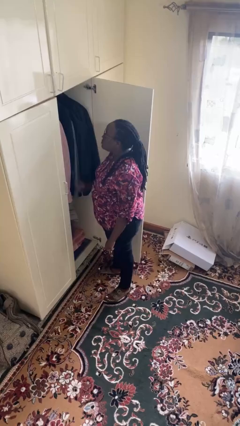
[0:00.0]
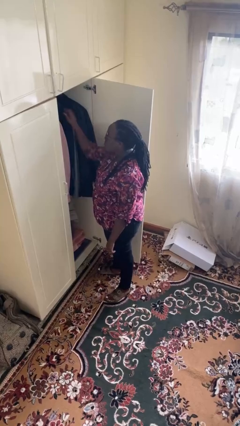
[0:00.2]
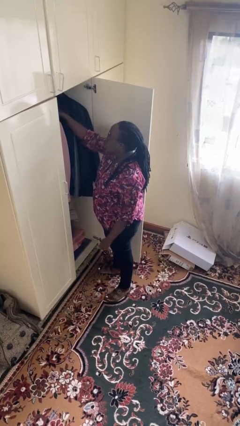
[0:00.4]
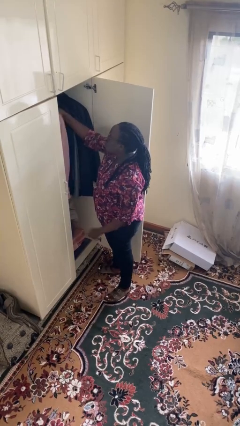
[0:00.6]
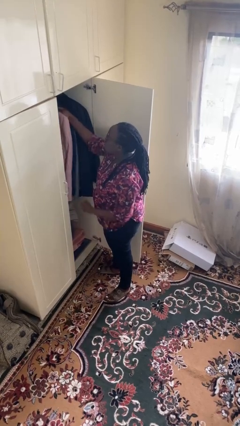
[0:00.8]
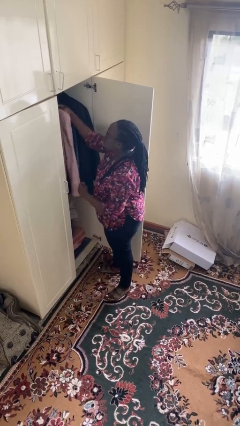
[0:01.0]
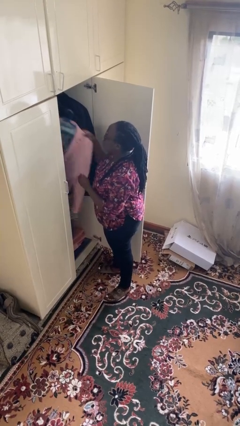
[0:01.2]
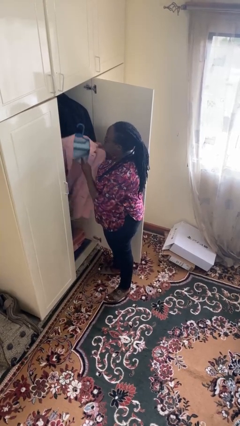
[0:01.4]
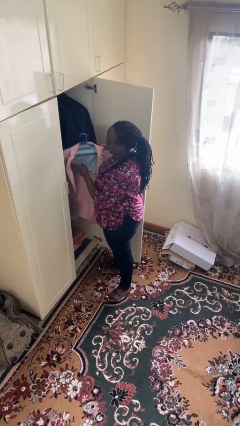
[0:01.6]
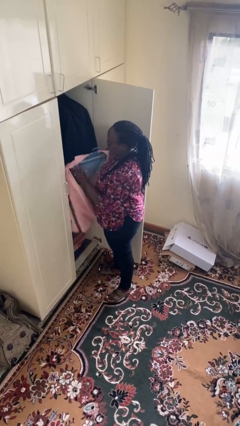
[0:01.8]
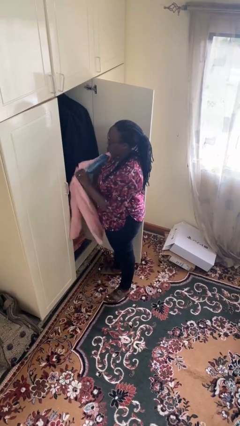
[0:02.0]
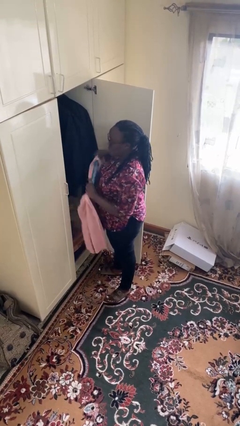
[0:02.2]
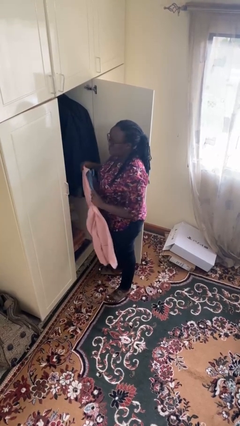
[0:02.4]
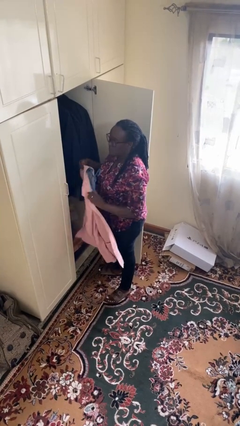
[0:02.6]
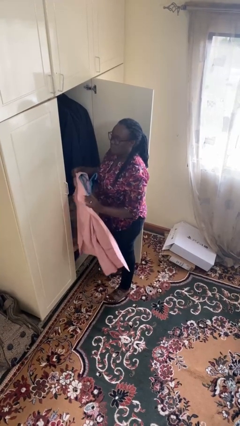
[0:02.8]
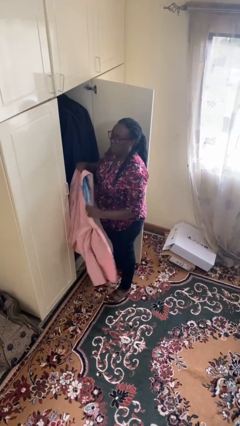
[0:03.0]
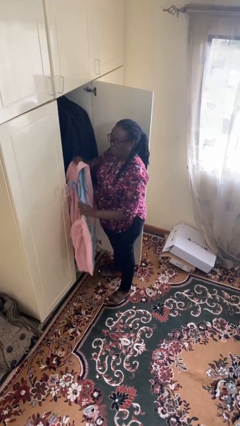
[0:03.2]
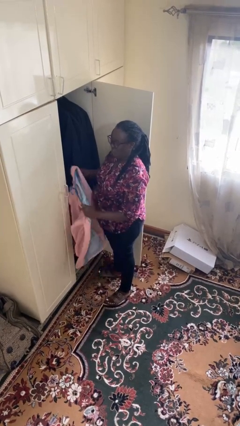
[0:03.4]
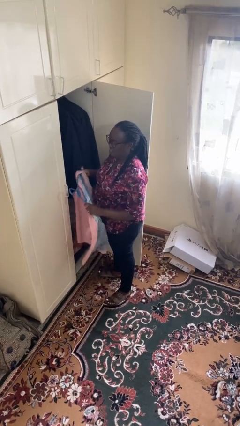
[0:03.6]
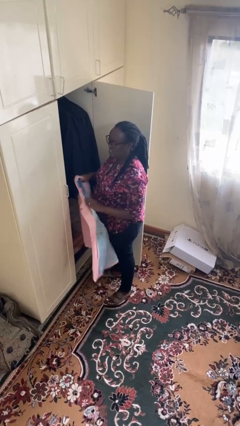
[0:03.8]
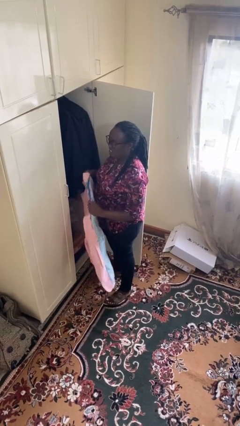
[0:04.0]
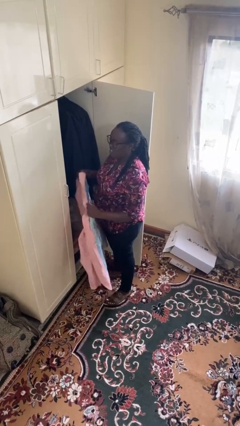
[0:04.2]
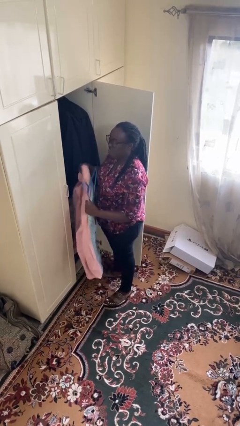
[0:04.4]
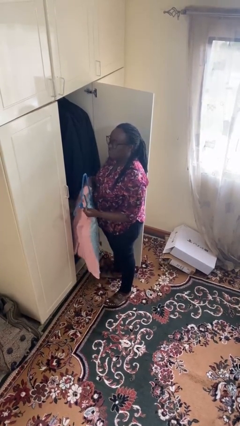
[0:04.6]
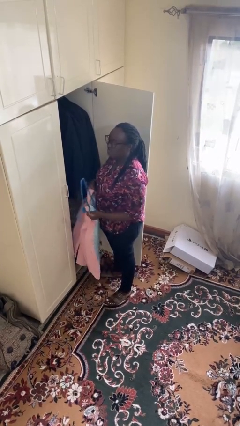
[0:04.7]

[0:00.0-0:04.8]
person takes clothes from closet

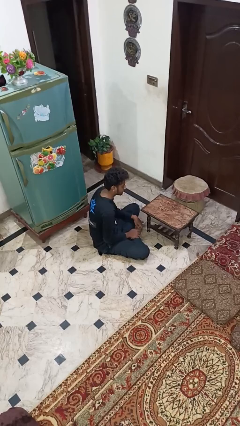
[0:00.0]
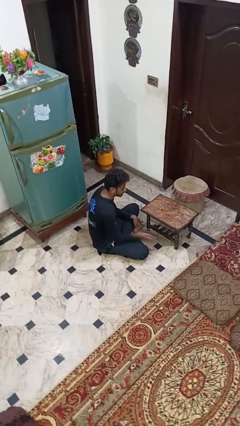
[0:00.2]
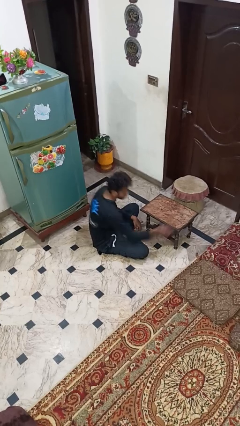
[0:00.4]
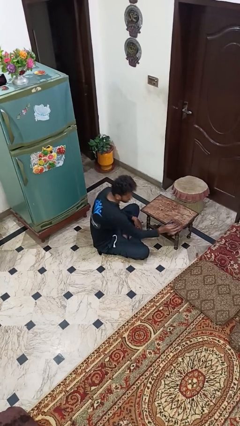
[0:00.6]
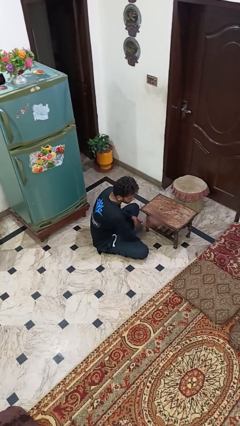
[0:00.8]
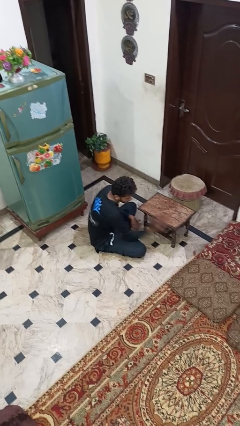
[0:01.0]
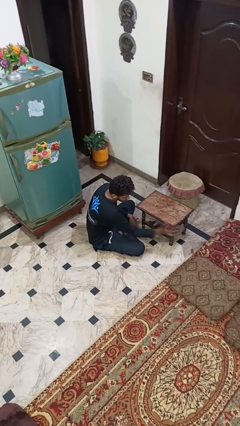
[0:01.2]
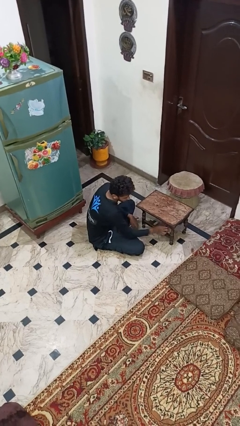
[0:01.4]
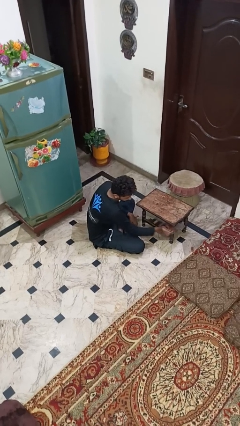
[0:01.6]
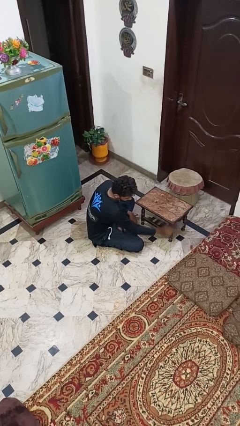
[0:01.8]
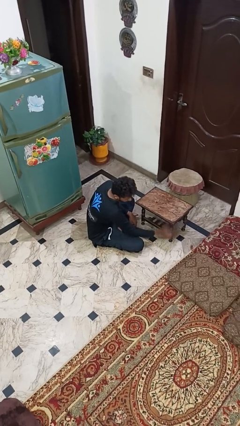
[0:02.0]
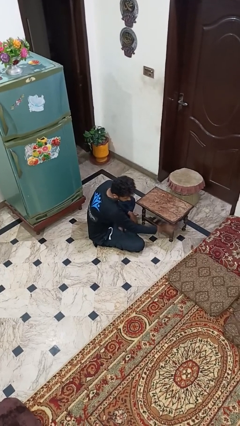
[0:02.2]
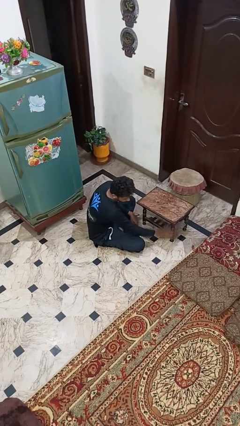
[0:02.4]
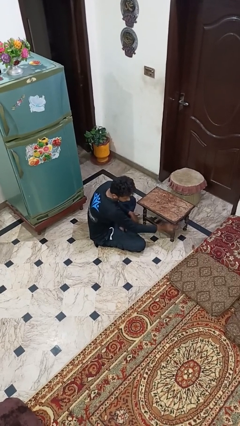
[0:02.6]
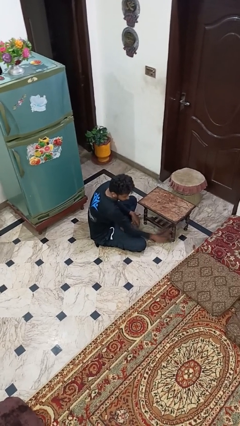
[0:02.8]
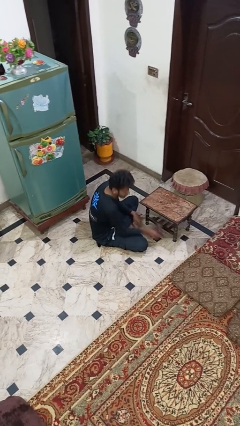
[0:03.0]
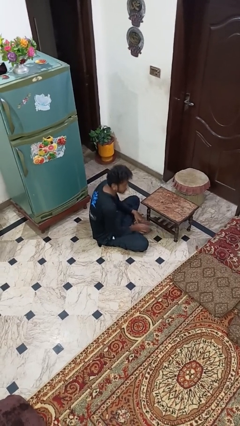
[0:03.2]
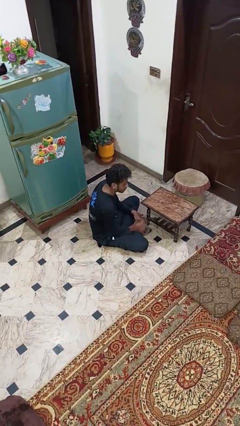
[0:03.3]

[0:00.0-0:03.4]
person cleans table with rag

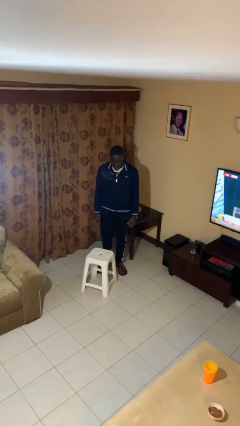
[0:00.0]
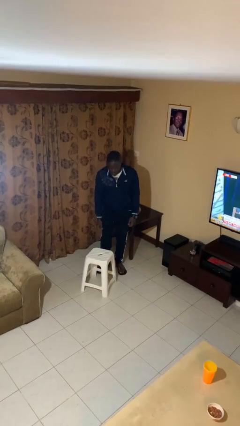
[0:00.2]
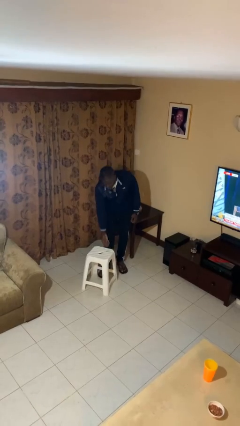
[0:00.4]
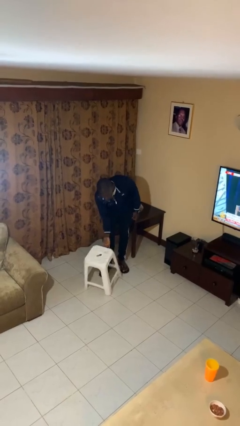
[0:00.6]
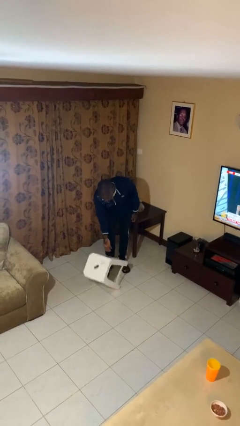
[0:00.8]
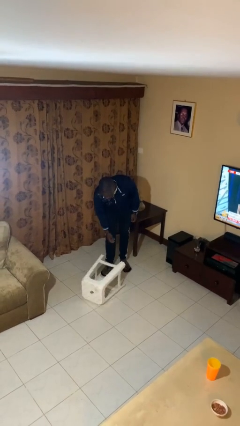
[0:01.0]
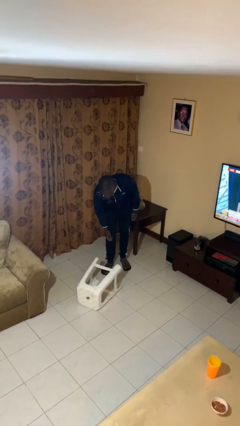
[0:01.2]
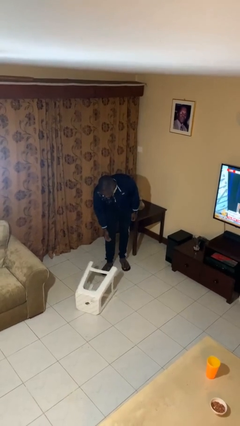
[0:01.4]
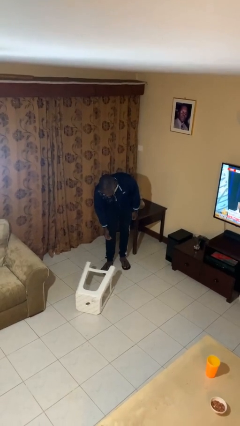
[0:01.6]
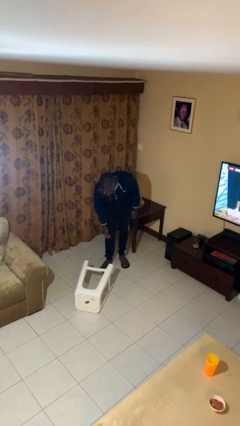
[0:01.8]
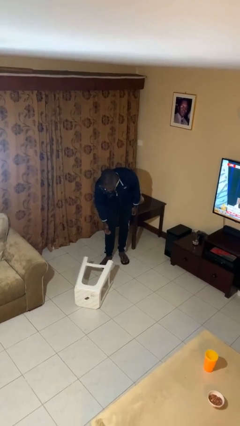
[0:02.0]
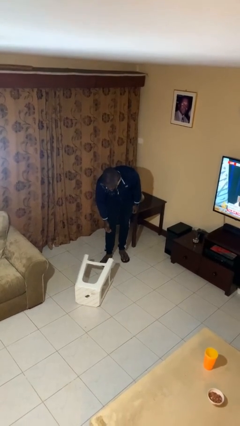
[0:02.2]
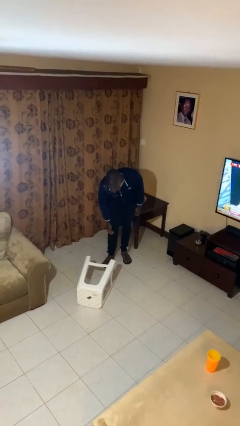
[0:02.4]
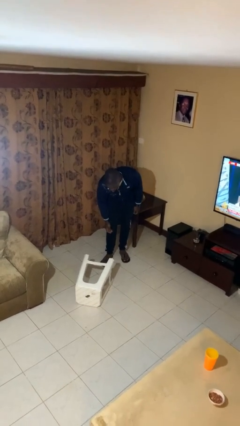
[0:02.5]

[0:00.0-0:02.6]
person knocks over furniture

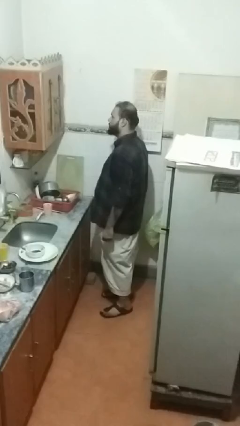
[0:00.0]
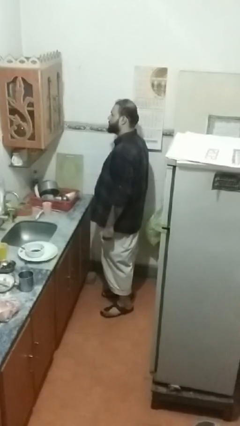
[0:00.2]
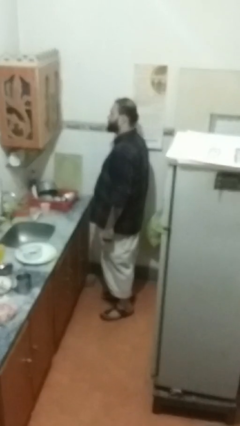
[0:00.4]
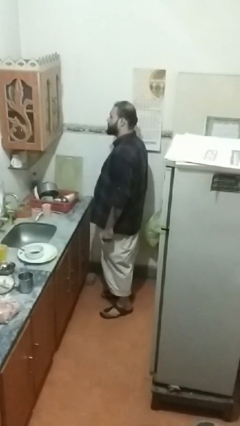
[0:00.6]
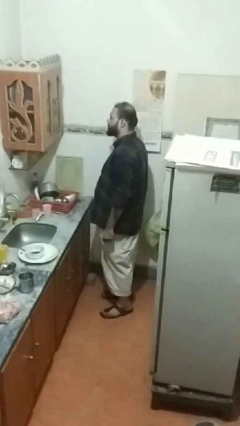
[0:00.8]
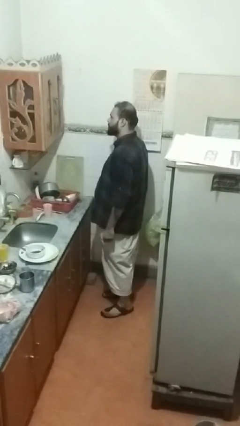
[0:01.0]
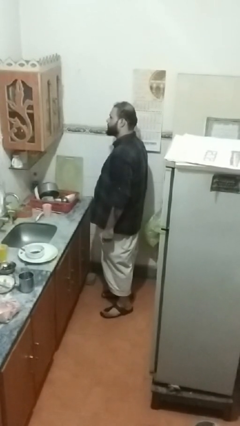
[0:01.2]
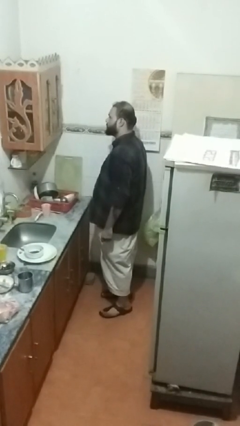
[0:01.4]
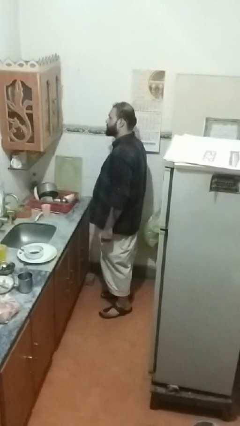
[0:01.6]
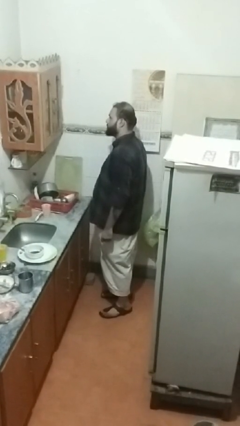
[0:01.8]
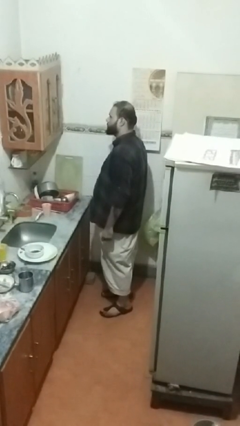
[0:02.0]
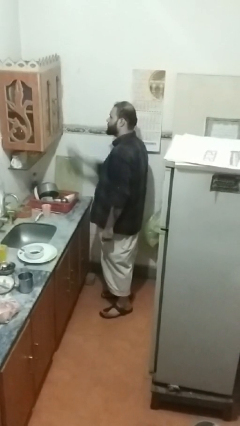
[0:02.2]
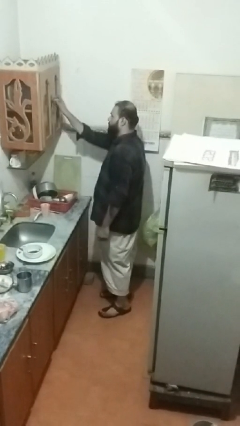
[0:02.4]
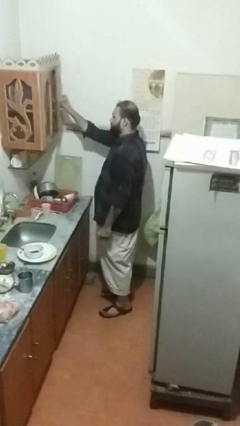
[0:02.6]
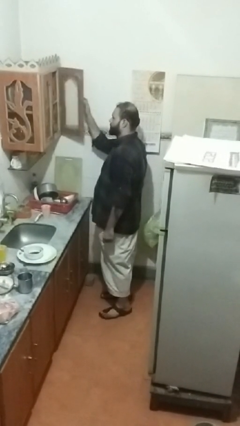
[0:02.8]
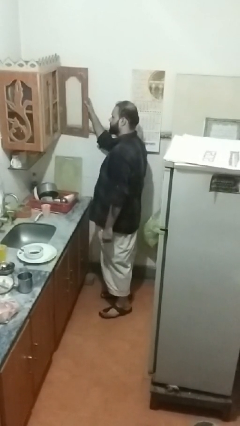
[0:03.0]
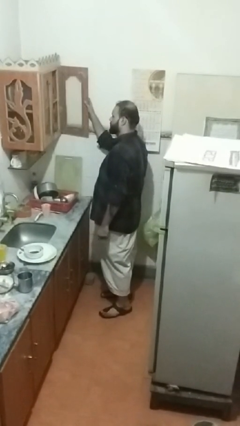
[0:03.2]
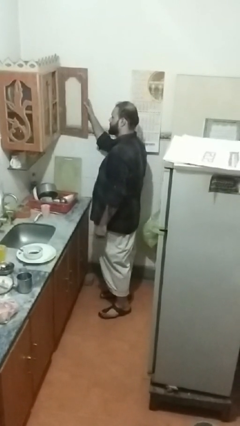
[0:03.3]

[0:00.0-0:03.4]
person opens cabinet

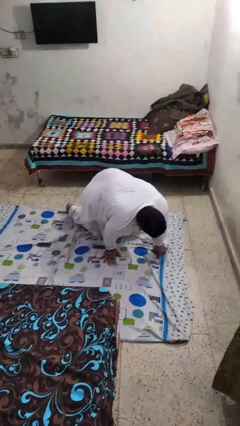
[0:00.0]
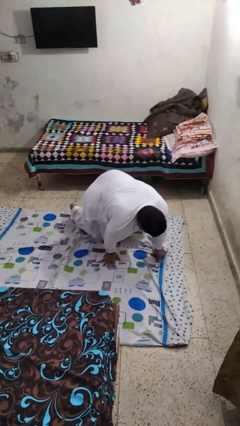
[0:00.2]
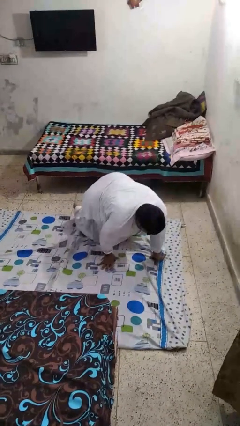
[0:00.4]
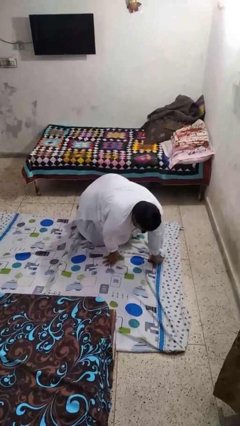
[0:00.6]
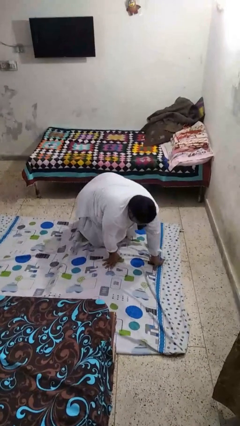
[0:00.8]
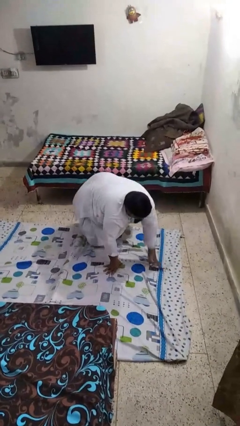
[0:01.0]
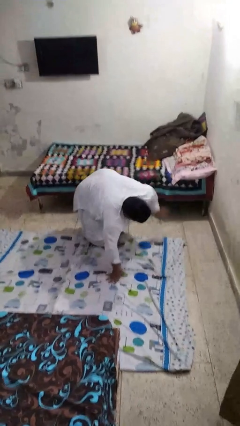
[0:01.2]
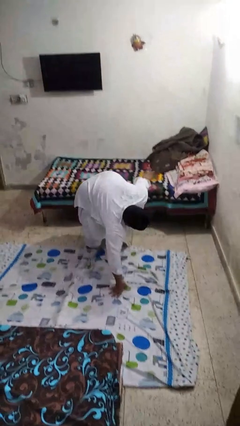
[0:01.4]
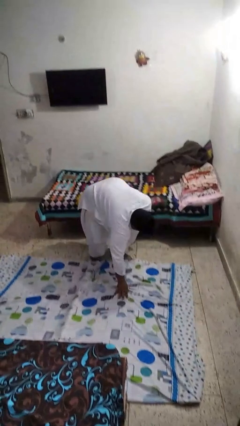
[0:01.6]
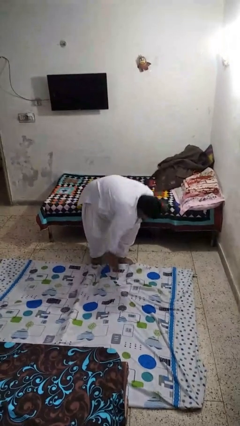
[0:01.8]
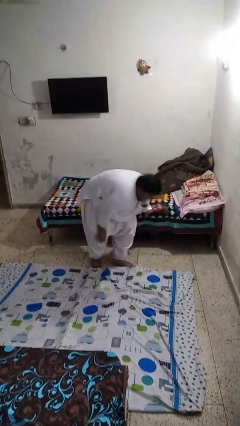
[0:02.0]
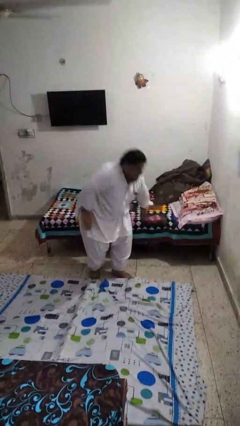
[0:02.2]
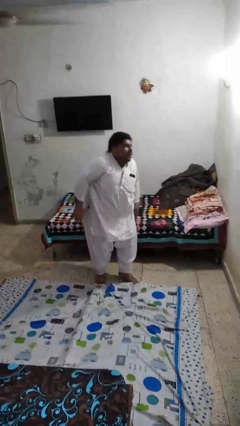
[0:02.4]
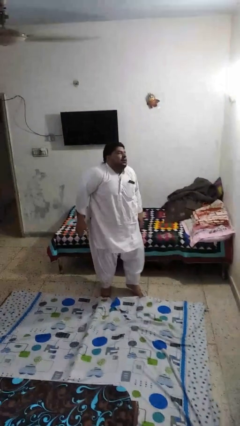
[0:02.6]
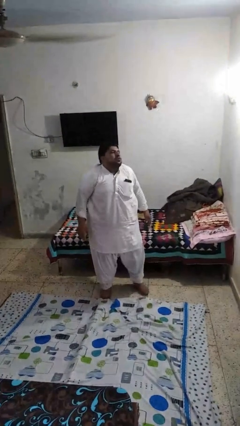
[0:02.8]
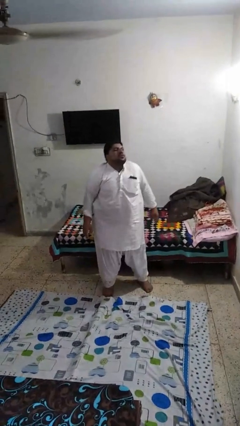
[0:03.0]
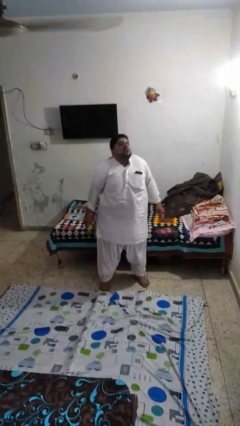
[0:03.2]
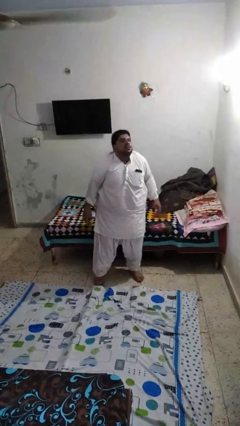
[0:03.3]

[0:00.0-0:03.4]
person stands up from floor
